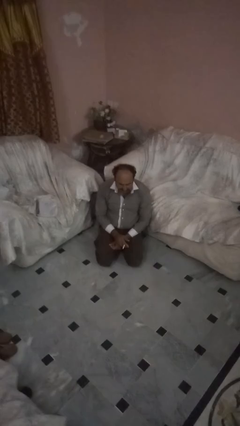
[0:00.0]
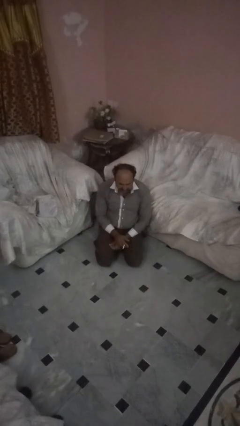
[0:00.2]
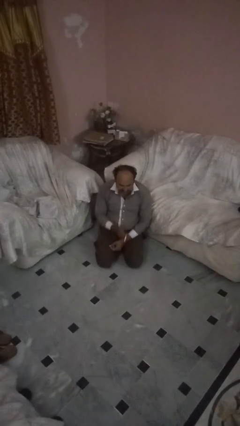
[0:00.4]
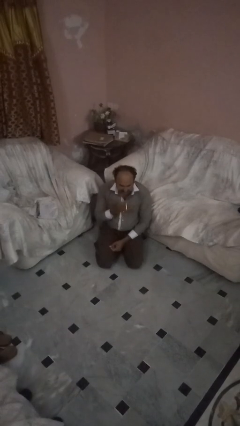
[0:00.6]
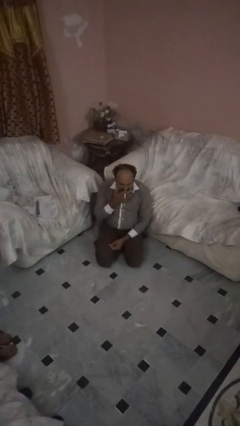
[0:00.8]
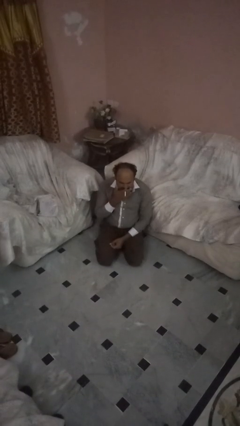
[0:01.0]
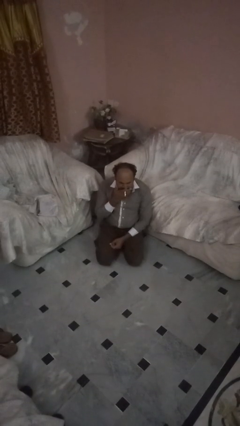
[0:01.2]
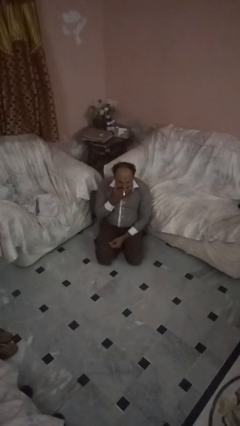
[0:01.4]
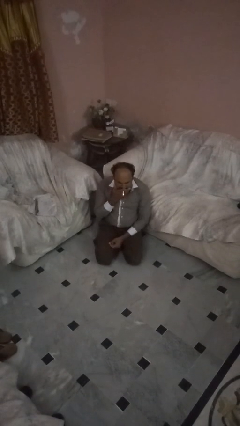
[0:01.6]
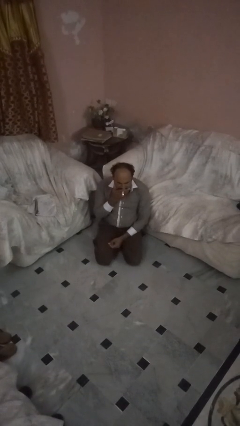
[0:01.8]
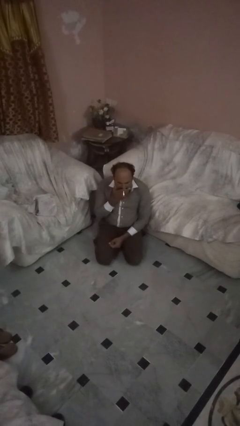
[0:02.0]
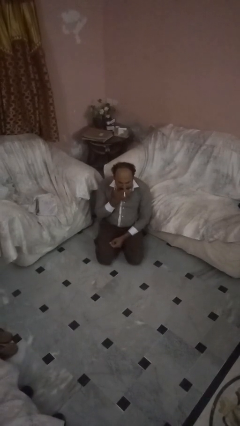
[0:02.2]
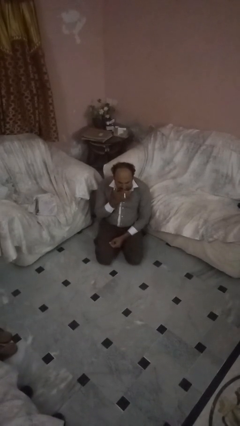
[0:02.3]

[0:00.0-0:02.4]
person vapes

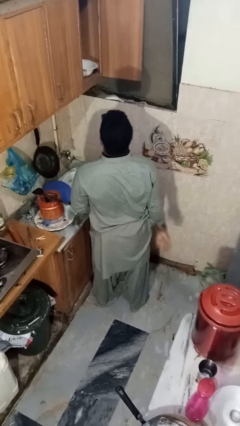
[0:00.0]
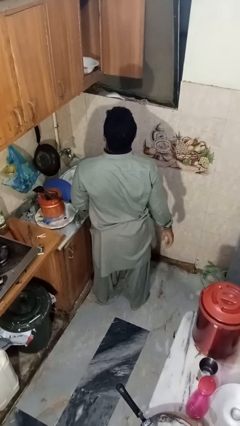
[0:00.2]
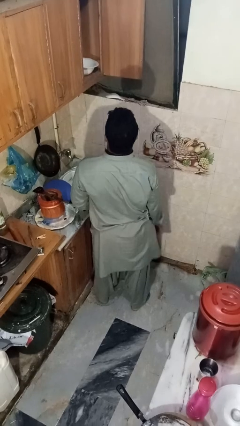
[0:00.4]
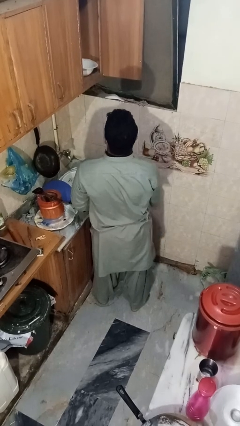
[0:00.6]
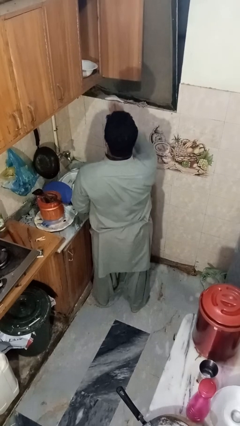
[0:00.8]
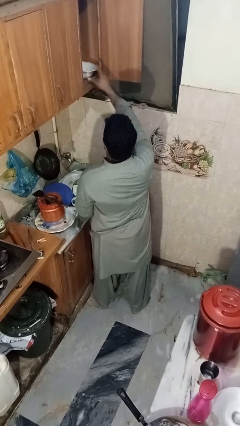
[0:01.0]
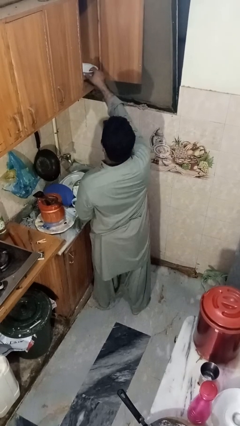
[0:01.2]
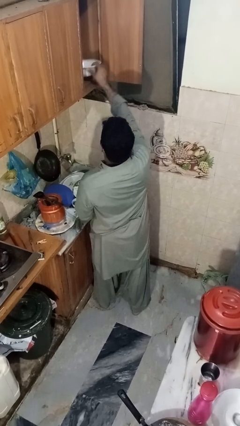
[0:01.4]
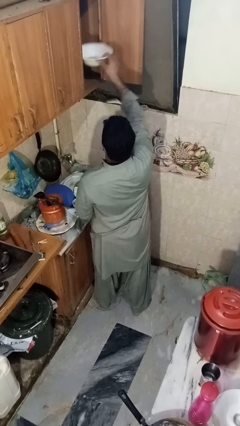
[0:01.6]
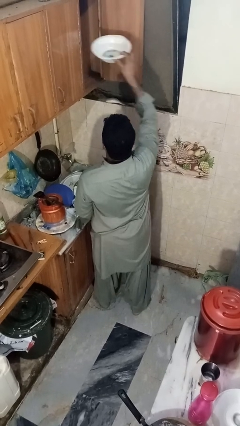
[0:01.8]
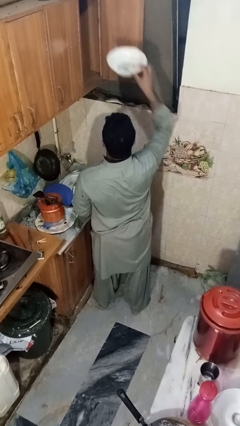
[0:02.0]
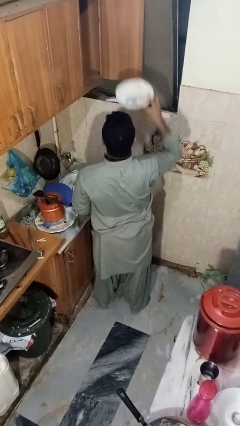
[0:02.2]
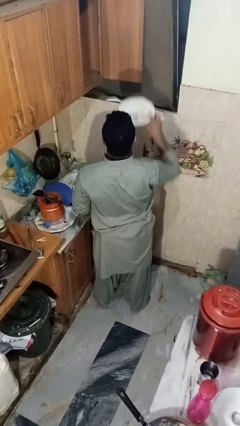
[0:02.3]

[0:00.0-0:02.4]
person takes object from cabinet

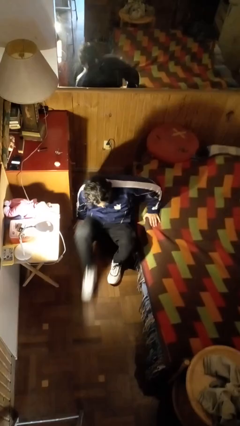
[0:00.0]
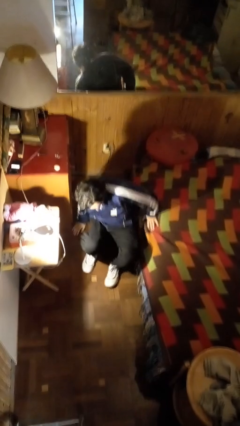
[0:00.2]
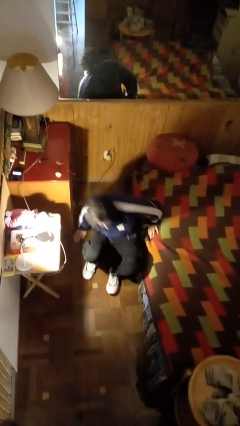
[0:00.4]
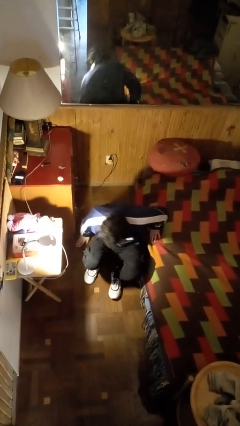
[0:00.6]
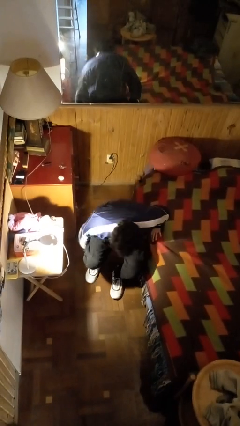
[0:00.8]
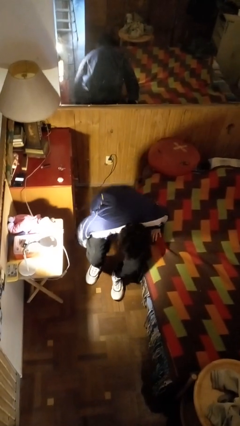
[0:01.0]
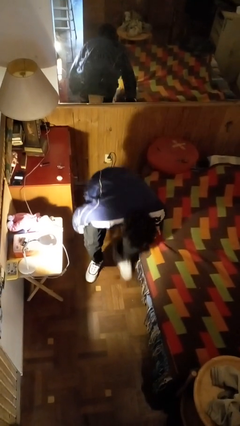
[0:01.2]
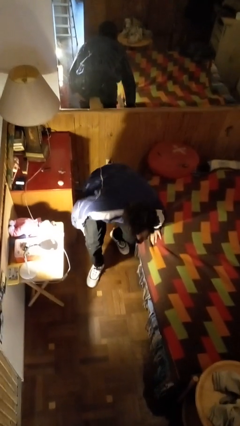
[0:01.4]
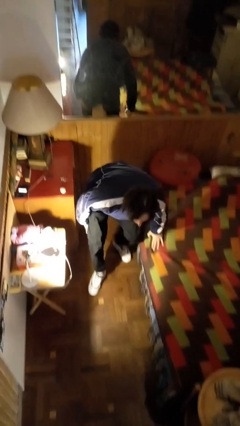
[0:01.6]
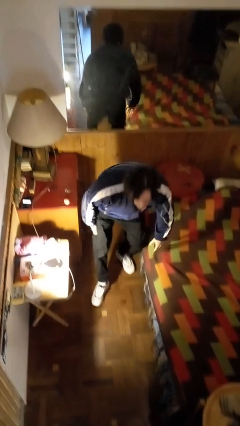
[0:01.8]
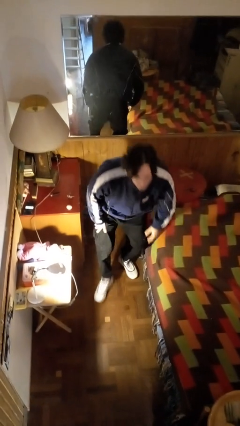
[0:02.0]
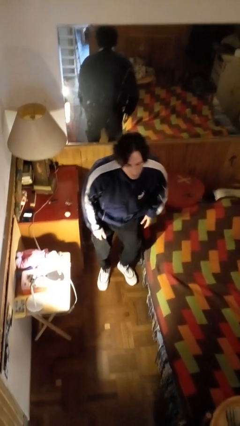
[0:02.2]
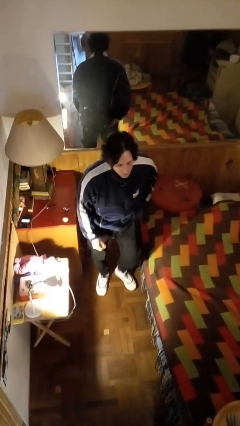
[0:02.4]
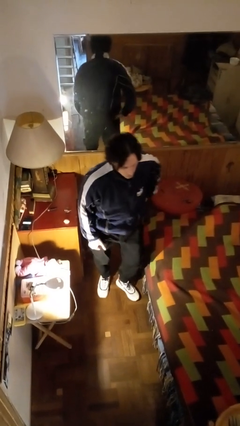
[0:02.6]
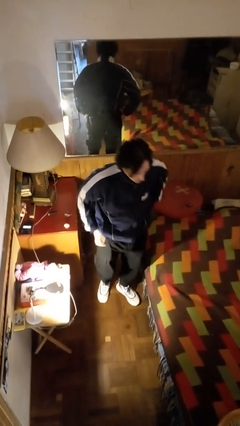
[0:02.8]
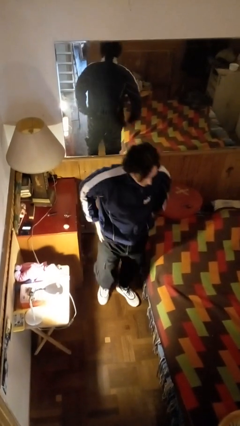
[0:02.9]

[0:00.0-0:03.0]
person stands up from floor

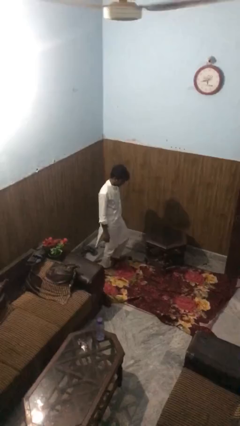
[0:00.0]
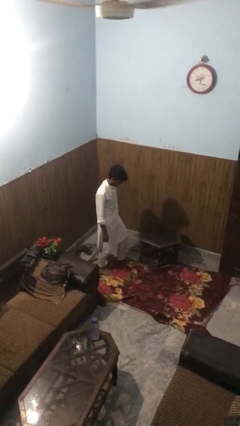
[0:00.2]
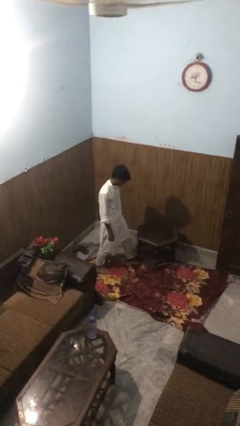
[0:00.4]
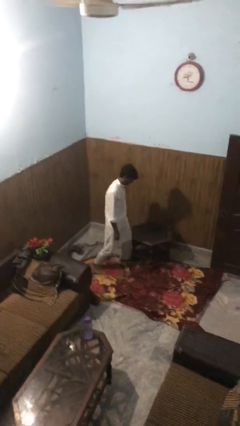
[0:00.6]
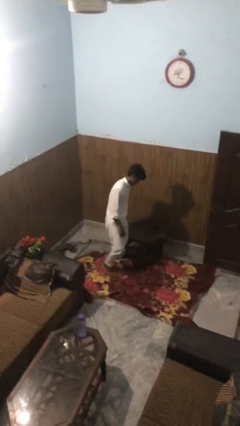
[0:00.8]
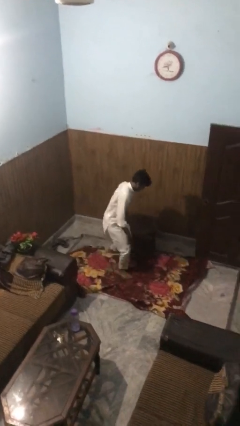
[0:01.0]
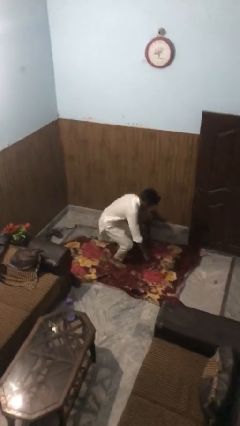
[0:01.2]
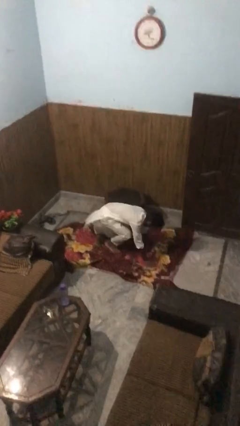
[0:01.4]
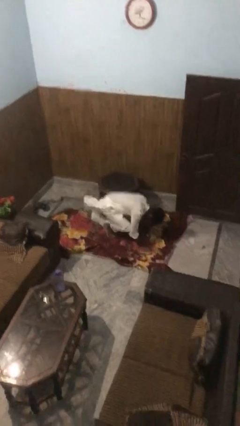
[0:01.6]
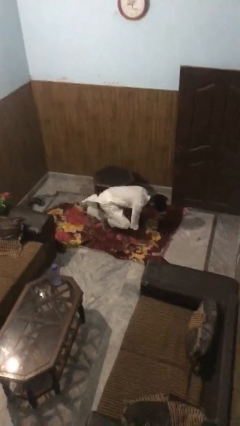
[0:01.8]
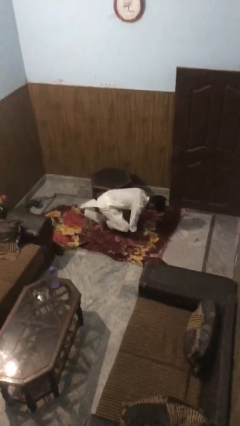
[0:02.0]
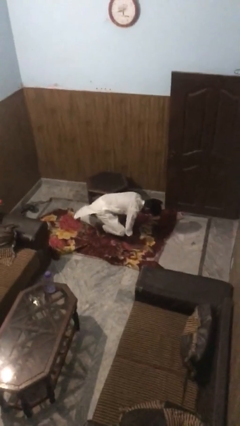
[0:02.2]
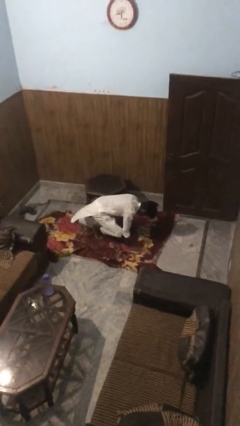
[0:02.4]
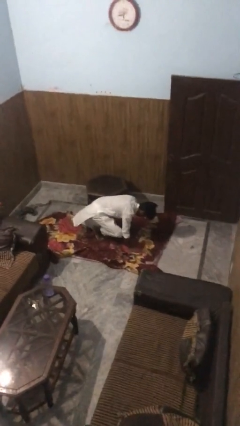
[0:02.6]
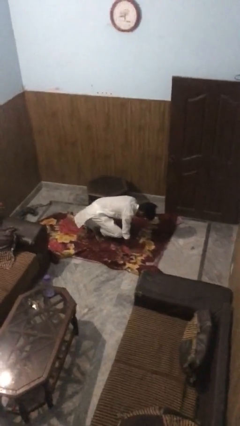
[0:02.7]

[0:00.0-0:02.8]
person bumps into table

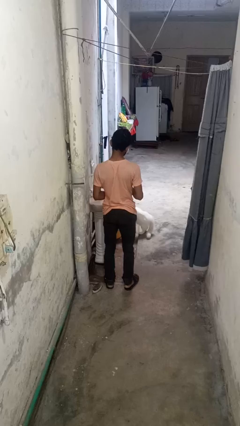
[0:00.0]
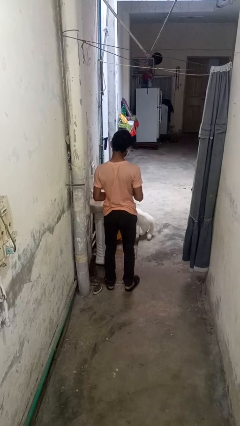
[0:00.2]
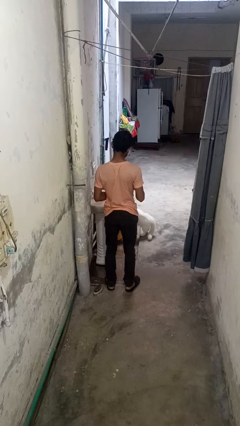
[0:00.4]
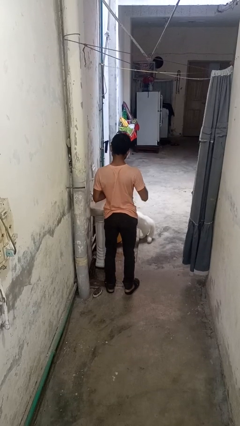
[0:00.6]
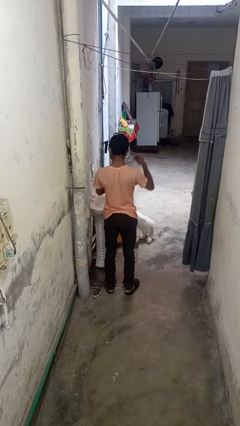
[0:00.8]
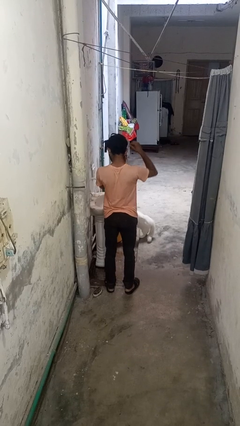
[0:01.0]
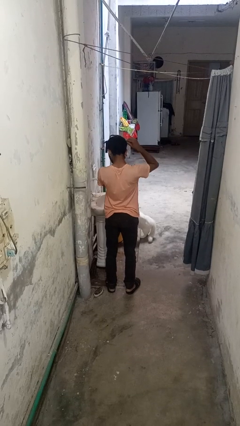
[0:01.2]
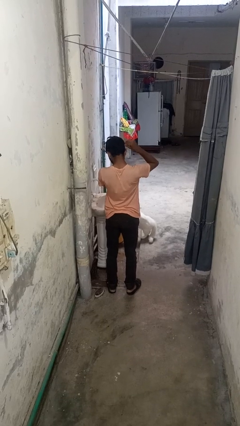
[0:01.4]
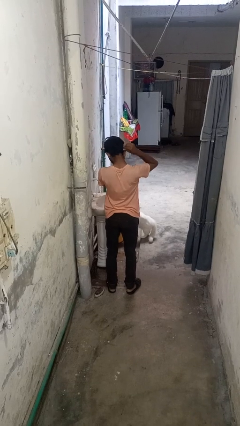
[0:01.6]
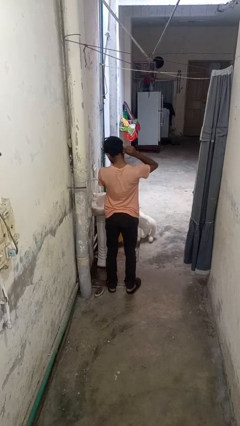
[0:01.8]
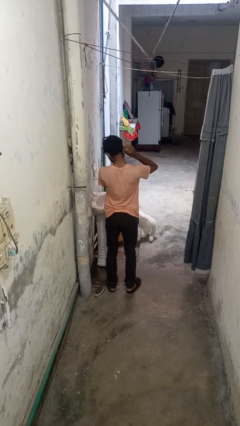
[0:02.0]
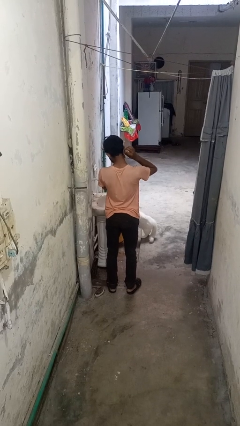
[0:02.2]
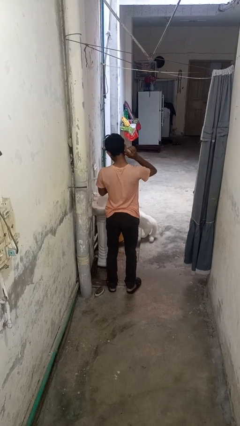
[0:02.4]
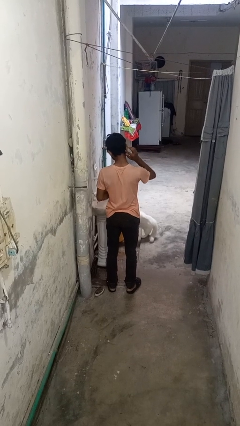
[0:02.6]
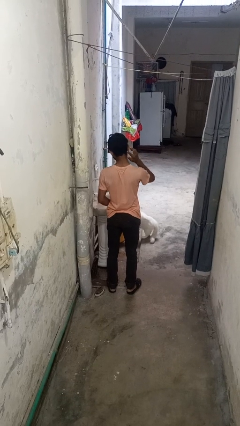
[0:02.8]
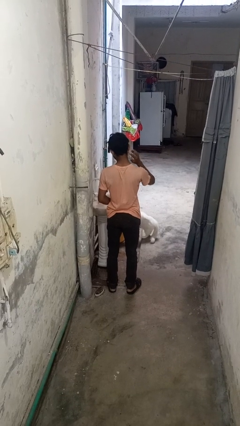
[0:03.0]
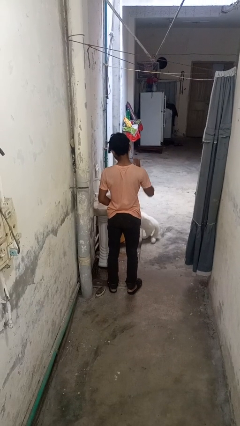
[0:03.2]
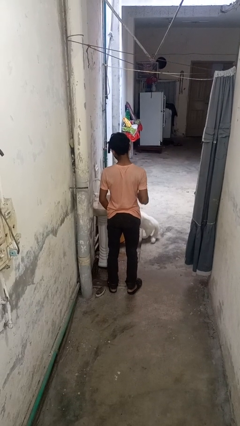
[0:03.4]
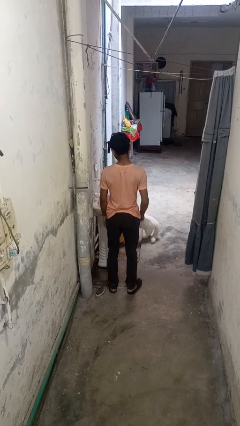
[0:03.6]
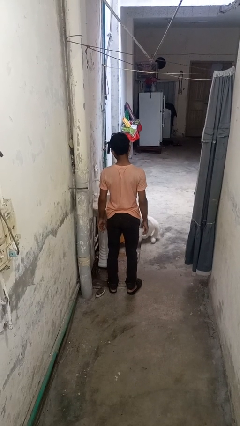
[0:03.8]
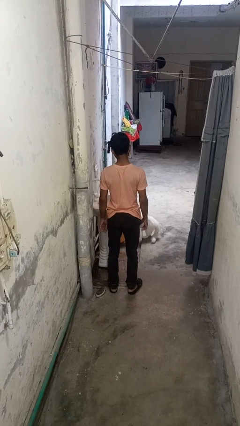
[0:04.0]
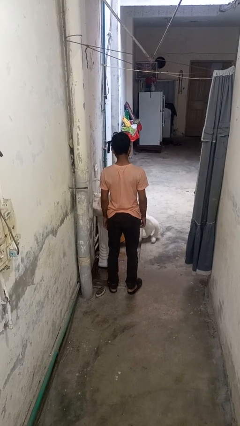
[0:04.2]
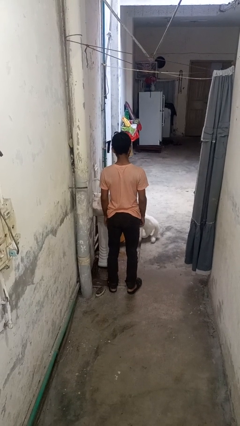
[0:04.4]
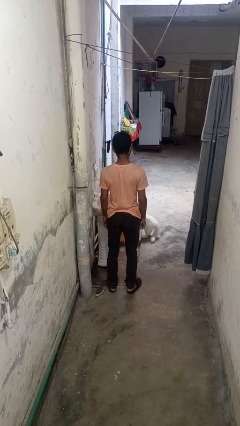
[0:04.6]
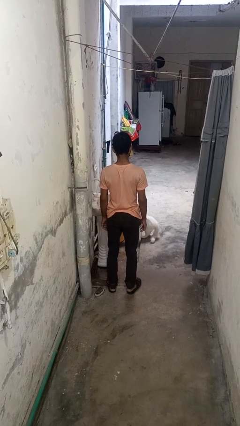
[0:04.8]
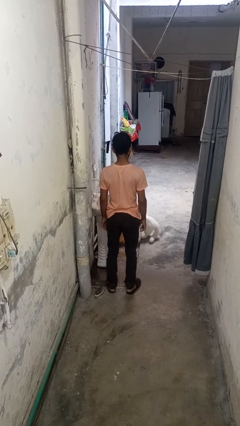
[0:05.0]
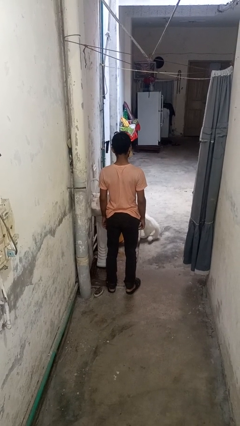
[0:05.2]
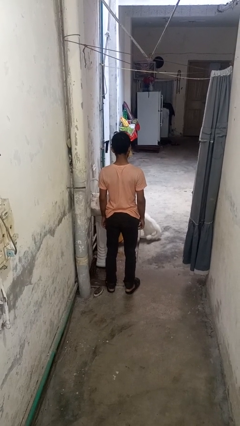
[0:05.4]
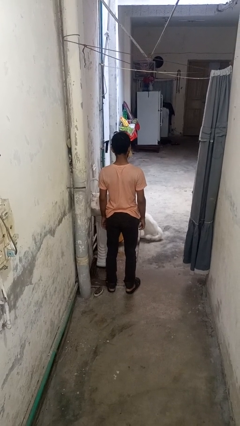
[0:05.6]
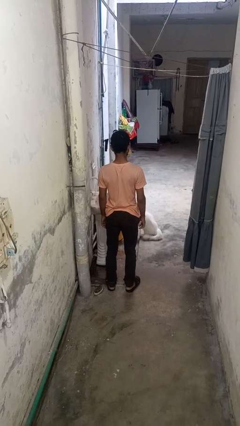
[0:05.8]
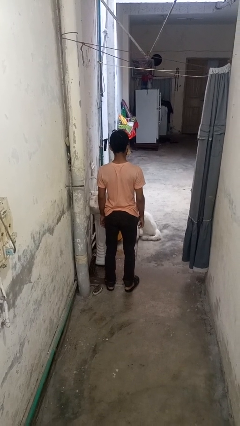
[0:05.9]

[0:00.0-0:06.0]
person puts on earrings

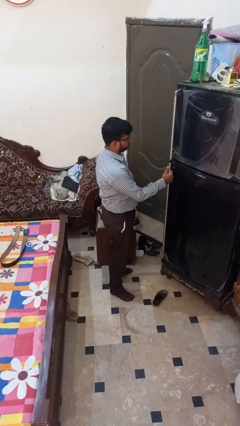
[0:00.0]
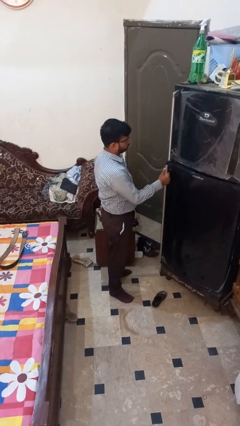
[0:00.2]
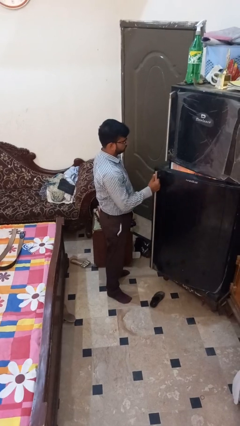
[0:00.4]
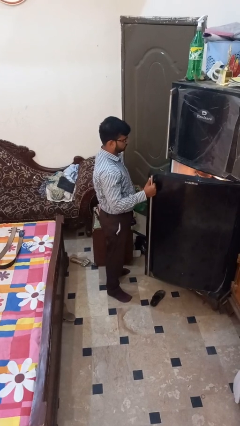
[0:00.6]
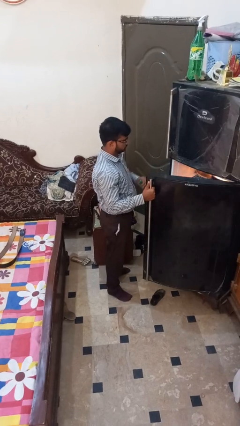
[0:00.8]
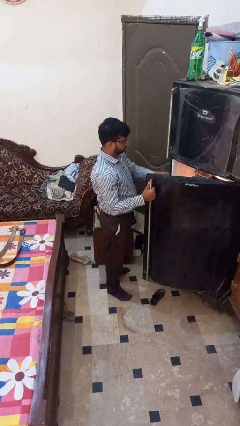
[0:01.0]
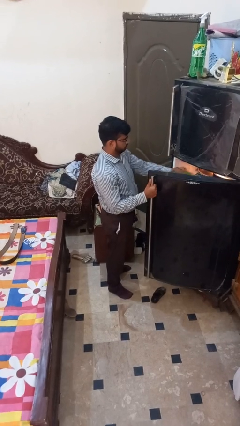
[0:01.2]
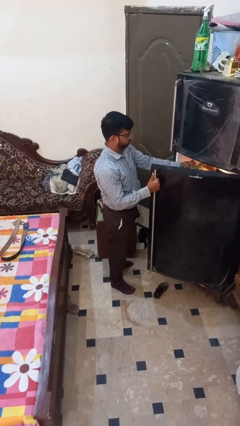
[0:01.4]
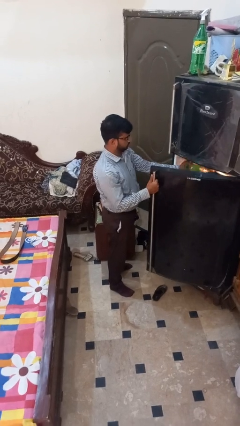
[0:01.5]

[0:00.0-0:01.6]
person opens refrigerator
